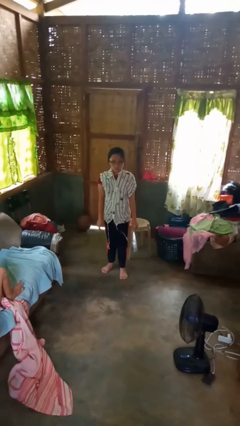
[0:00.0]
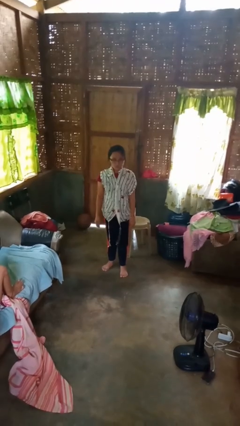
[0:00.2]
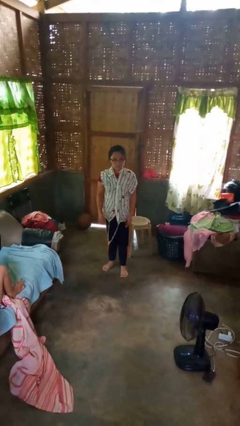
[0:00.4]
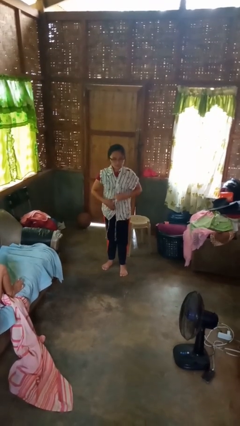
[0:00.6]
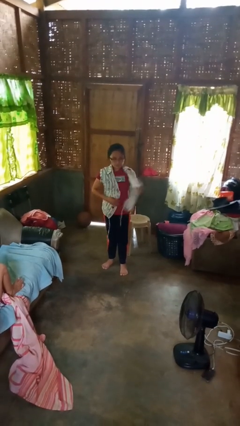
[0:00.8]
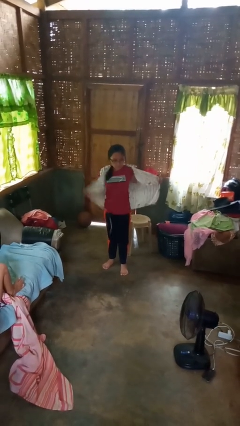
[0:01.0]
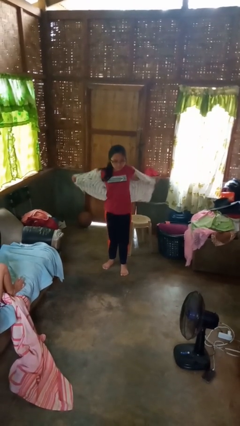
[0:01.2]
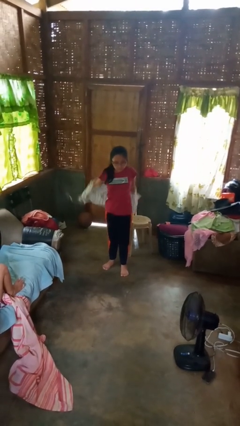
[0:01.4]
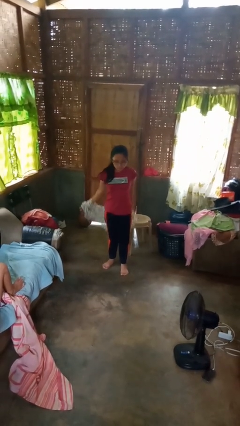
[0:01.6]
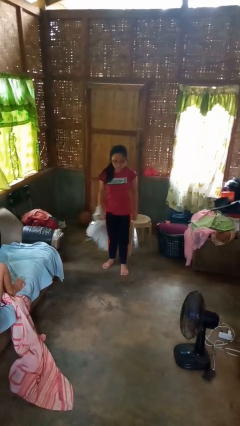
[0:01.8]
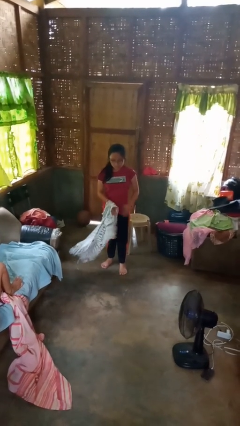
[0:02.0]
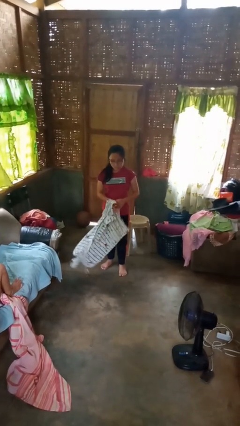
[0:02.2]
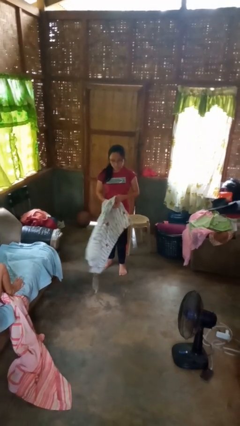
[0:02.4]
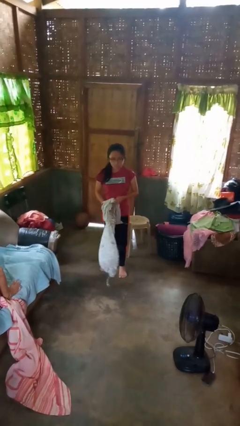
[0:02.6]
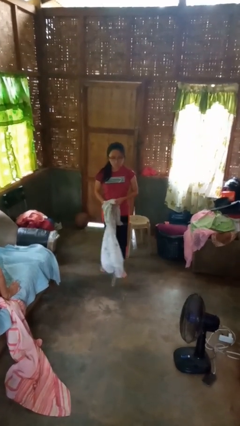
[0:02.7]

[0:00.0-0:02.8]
person takes off shirt

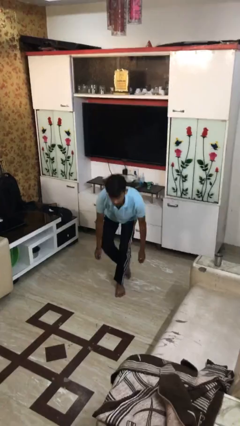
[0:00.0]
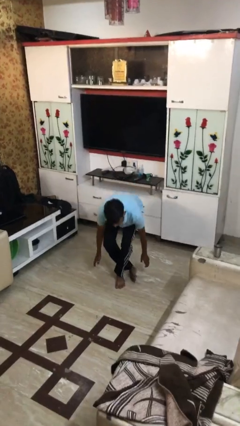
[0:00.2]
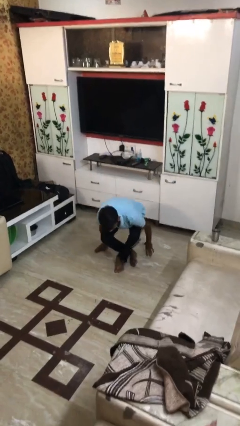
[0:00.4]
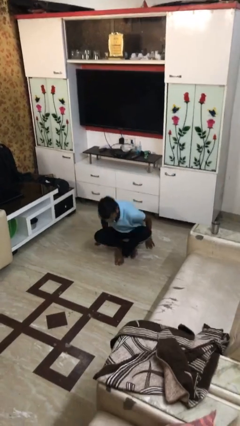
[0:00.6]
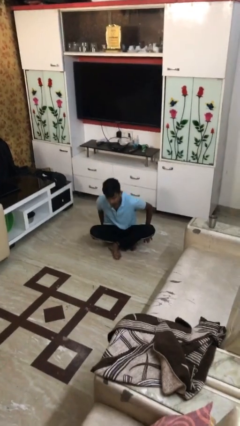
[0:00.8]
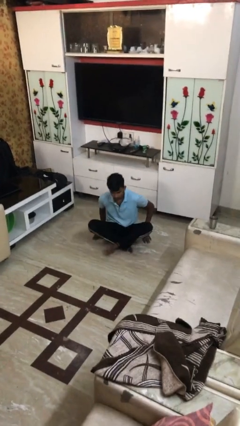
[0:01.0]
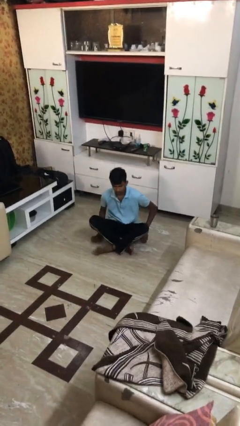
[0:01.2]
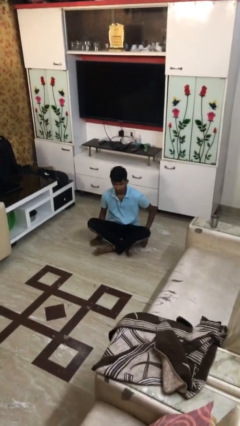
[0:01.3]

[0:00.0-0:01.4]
person sits crisscross

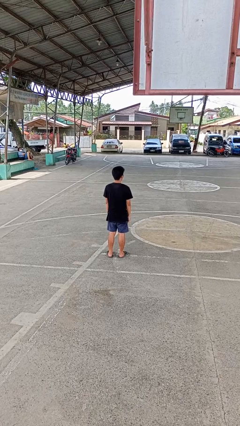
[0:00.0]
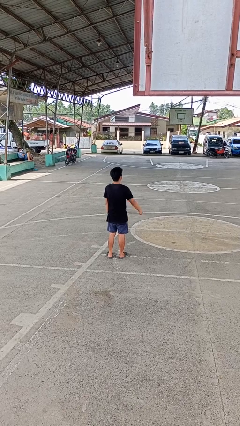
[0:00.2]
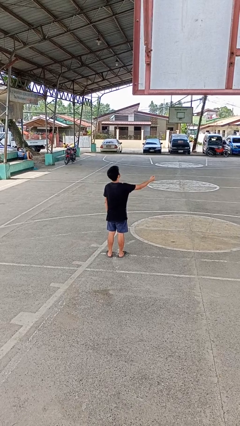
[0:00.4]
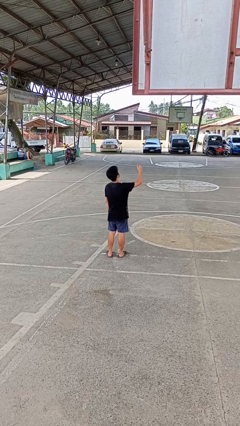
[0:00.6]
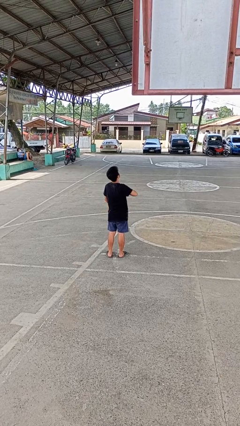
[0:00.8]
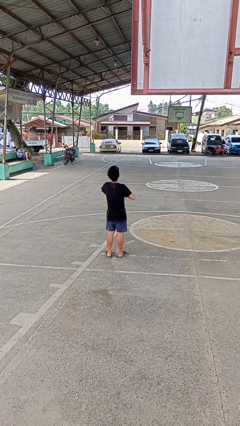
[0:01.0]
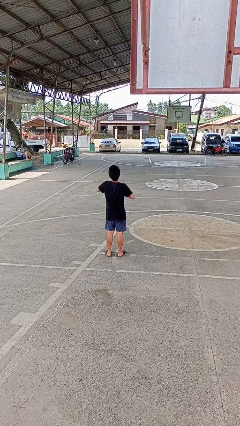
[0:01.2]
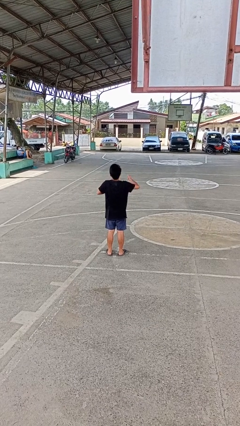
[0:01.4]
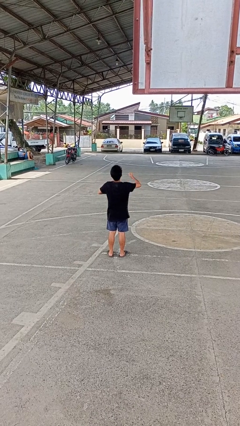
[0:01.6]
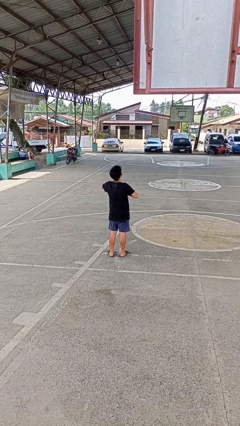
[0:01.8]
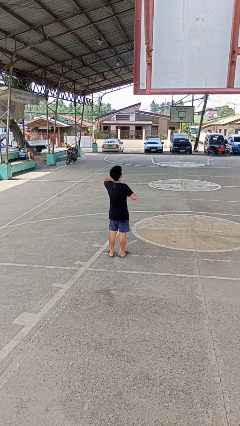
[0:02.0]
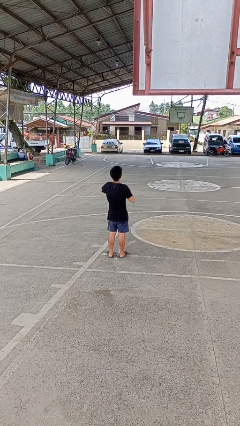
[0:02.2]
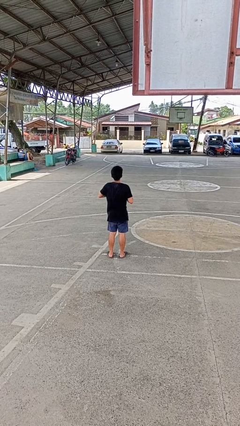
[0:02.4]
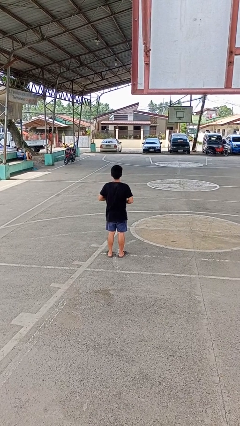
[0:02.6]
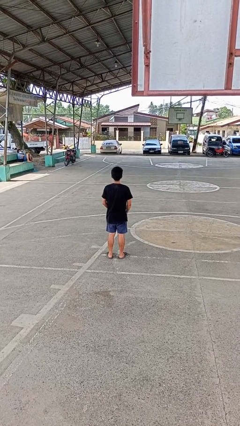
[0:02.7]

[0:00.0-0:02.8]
person drums on chest

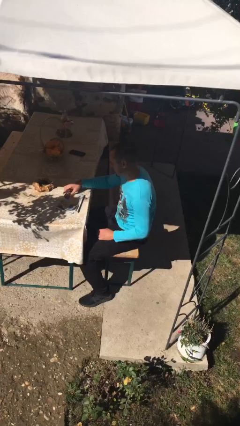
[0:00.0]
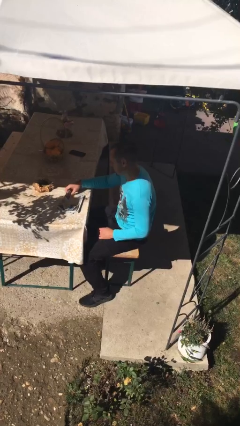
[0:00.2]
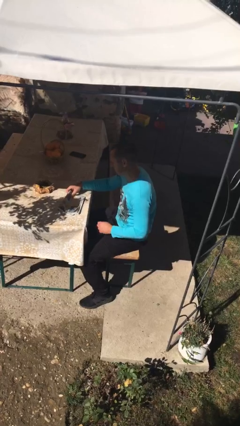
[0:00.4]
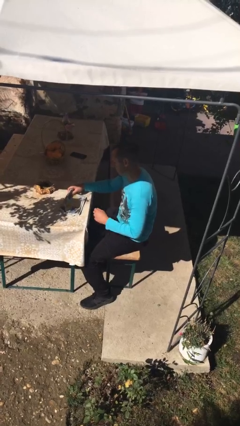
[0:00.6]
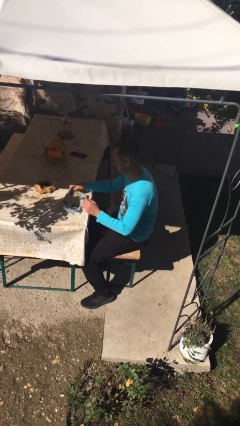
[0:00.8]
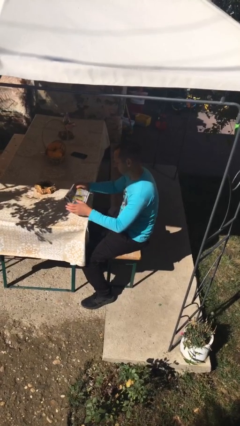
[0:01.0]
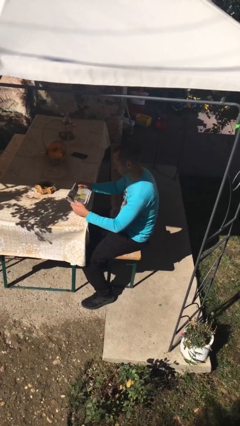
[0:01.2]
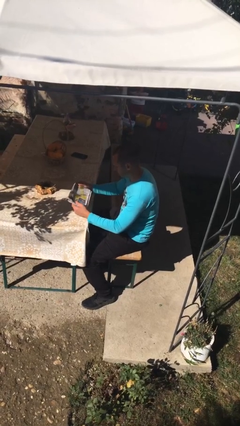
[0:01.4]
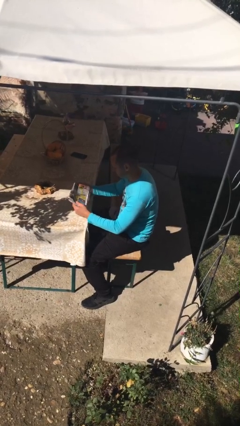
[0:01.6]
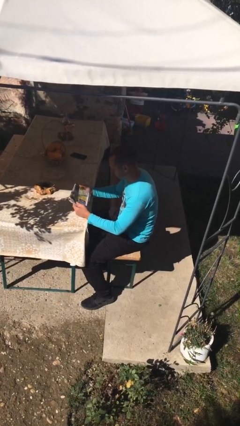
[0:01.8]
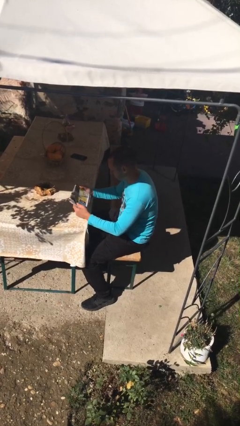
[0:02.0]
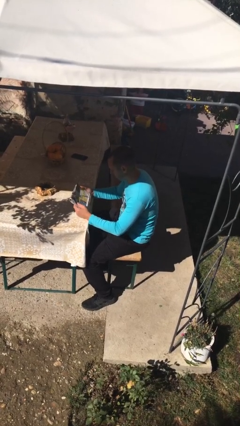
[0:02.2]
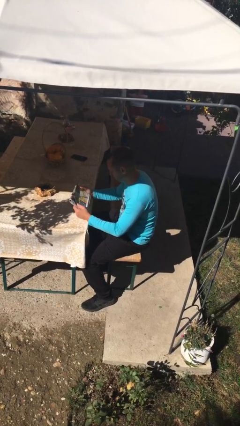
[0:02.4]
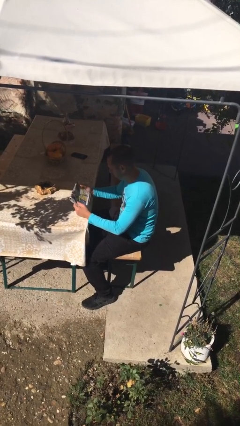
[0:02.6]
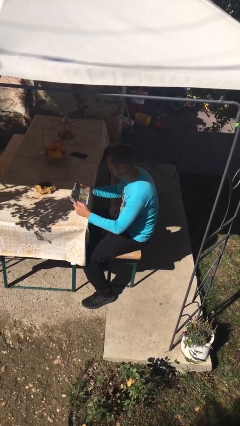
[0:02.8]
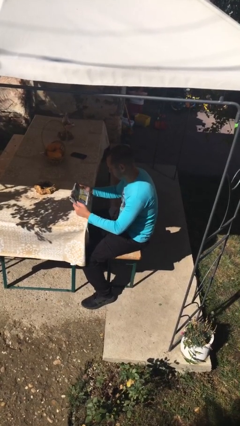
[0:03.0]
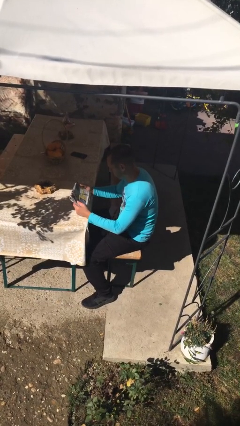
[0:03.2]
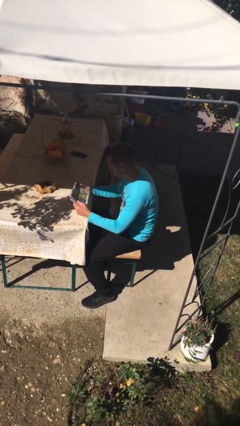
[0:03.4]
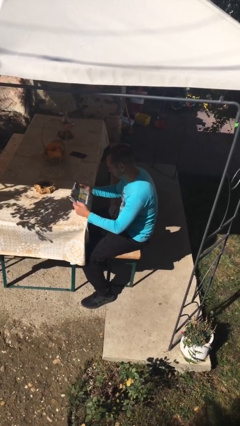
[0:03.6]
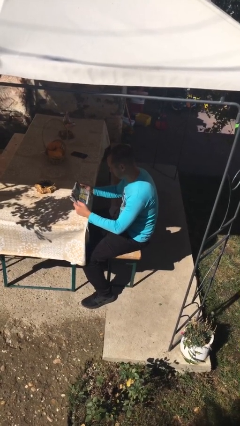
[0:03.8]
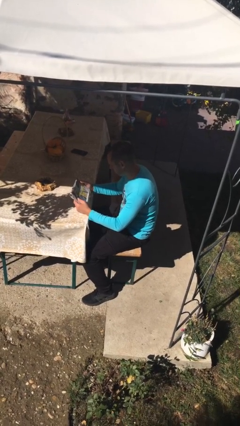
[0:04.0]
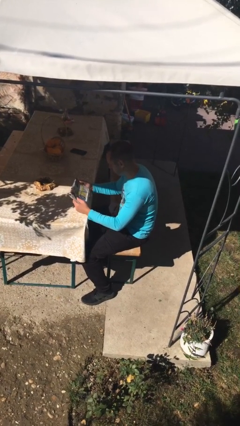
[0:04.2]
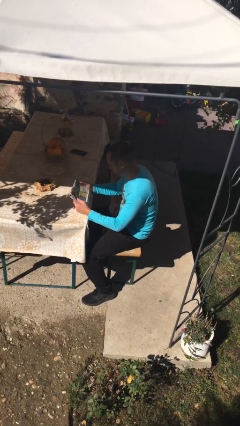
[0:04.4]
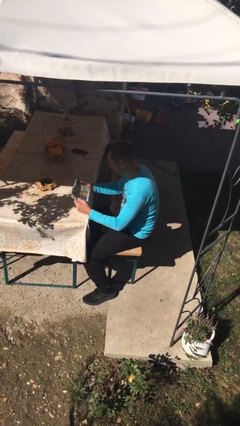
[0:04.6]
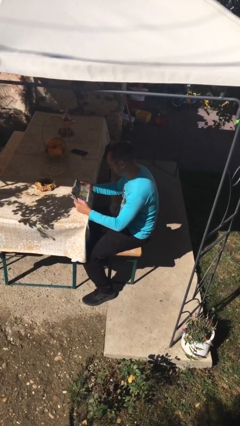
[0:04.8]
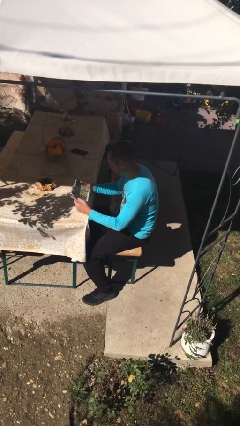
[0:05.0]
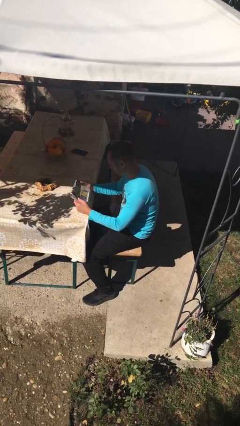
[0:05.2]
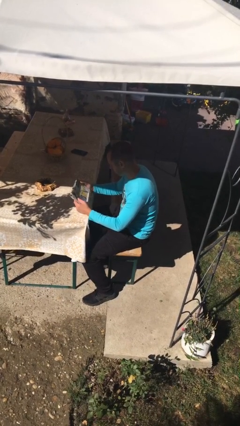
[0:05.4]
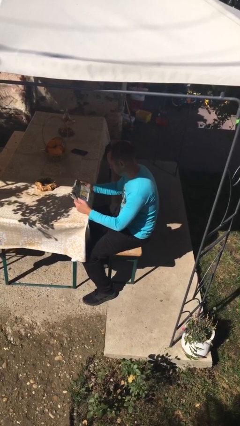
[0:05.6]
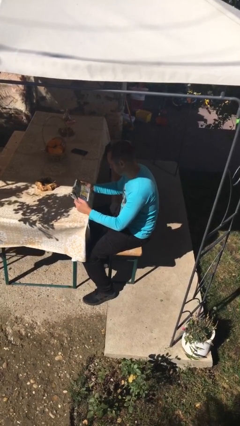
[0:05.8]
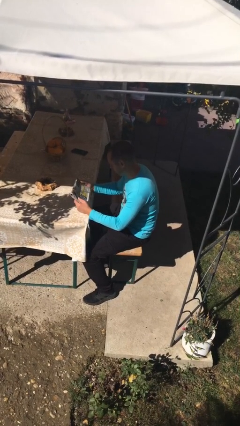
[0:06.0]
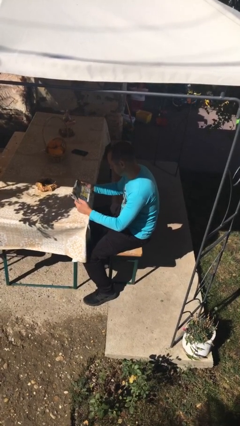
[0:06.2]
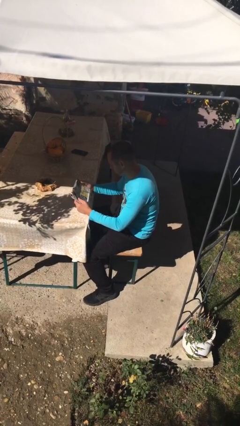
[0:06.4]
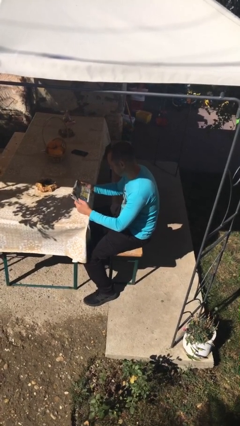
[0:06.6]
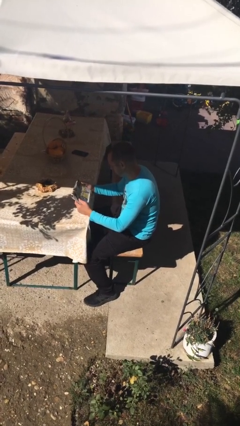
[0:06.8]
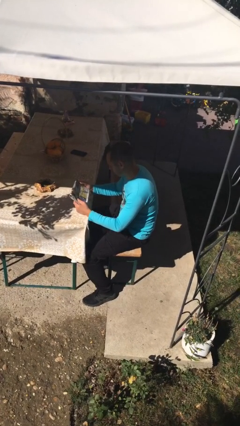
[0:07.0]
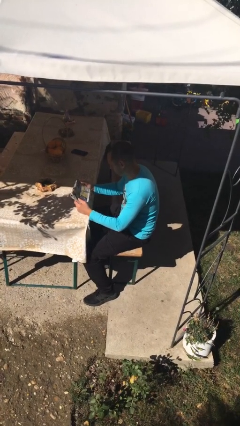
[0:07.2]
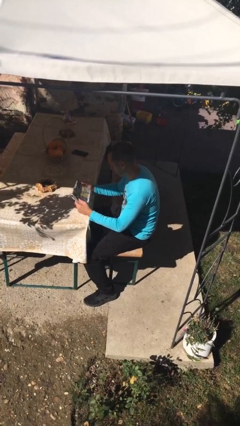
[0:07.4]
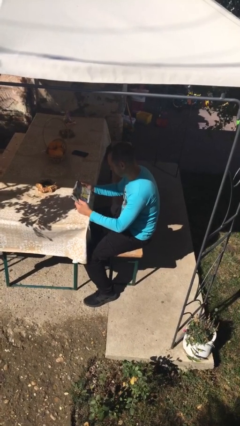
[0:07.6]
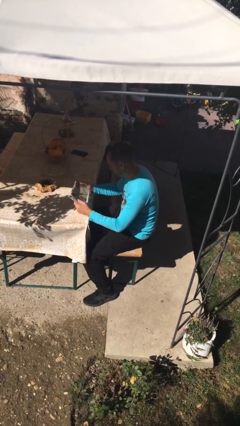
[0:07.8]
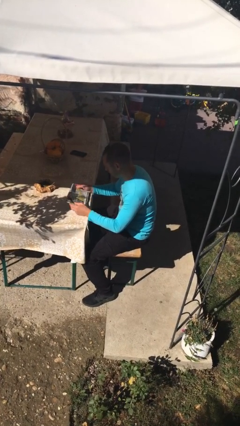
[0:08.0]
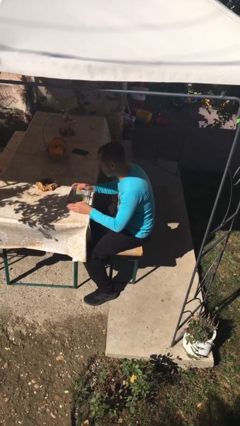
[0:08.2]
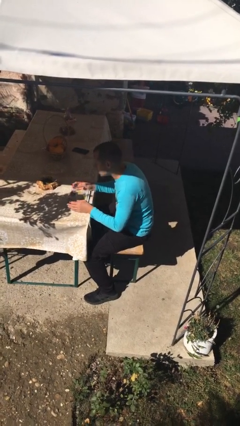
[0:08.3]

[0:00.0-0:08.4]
person reads document

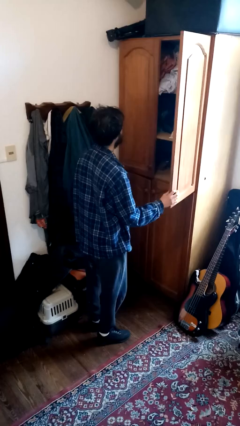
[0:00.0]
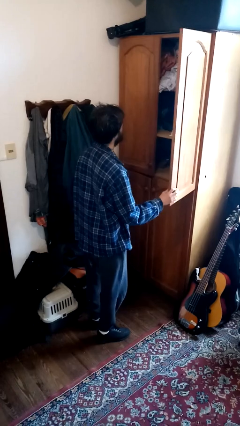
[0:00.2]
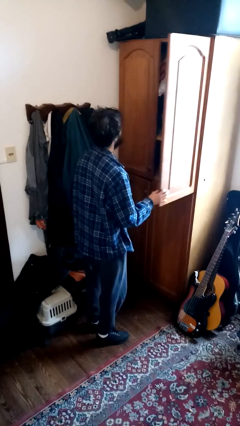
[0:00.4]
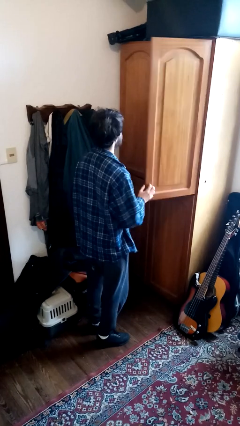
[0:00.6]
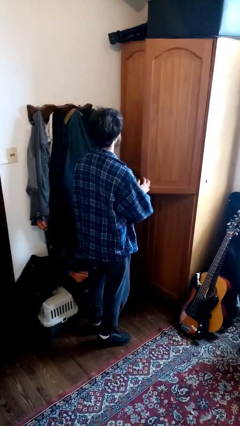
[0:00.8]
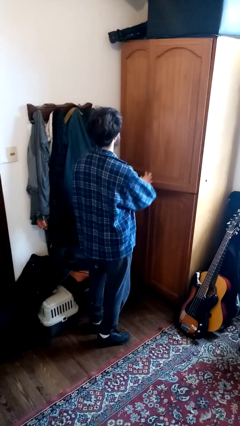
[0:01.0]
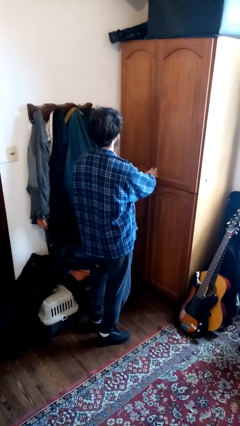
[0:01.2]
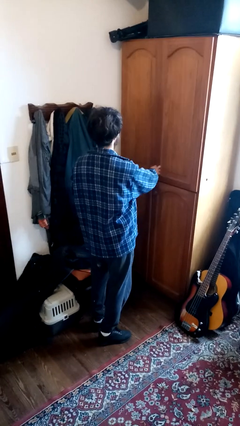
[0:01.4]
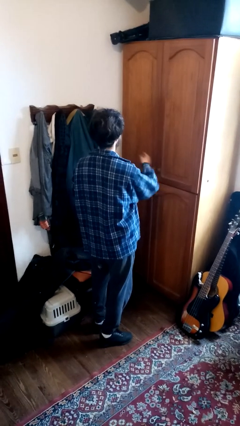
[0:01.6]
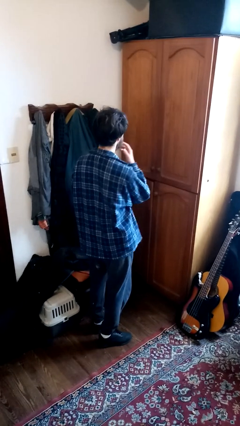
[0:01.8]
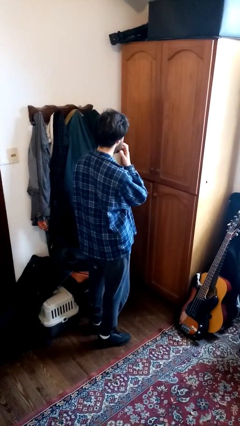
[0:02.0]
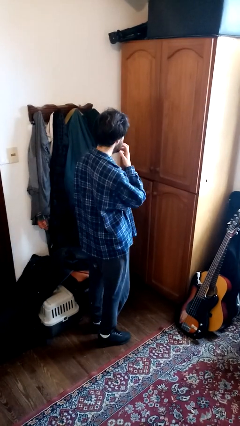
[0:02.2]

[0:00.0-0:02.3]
person closes dresser drawer
